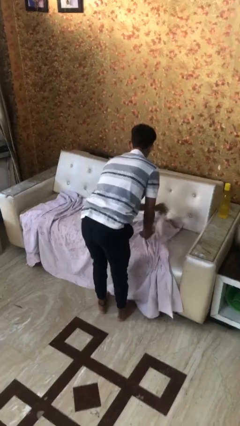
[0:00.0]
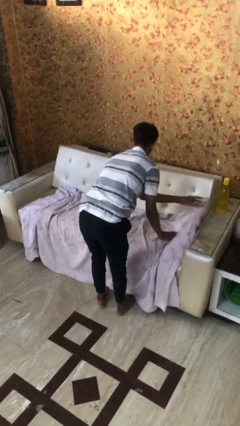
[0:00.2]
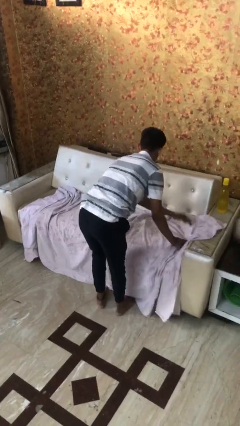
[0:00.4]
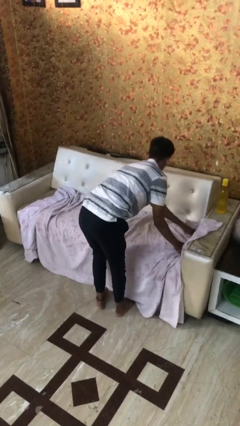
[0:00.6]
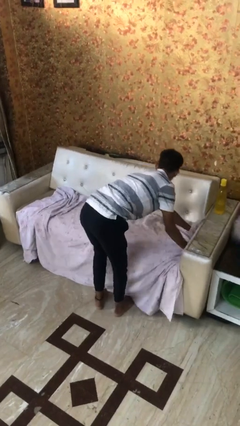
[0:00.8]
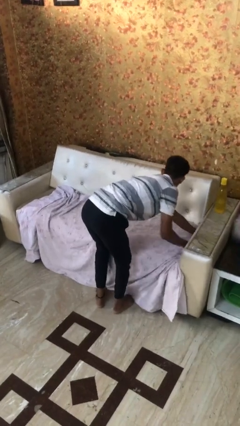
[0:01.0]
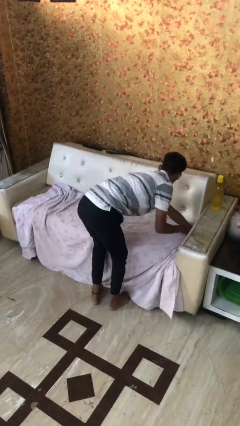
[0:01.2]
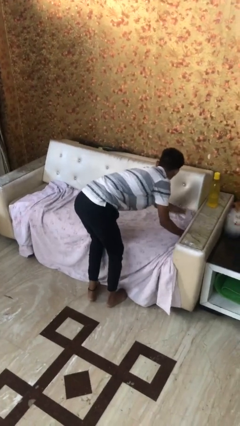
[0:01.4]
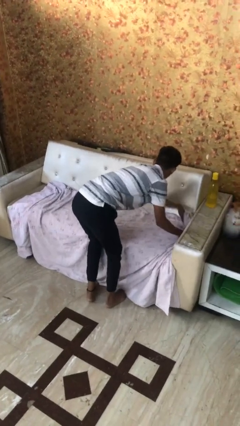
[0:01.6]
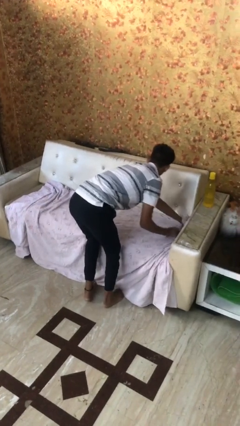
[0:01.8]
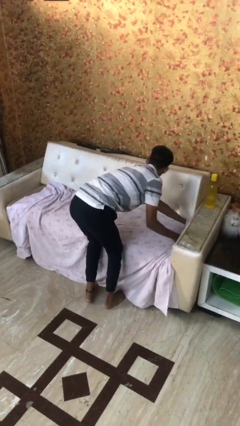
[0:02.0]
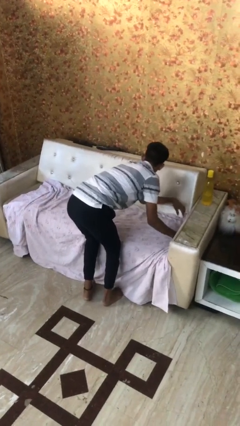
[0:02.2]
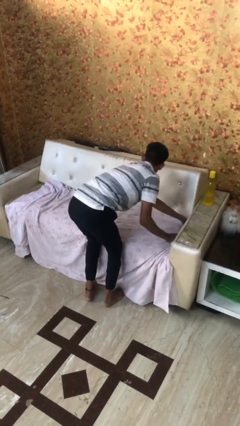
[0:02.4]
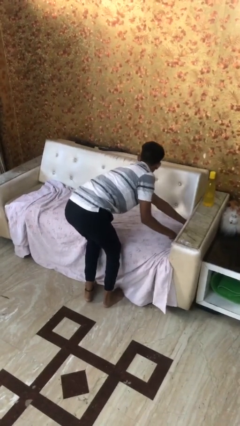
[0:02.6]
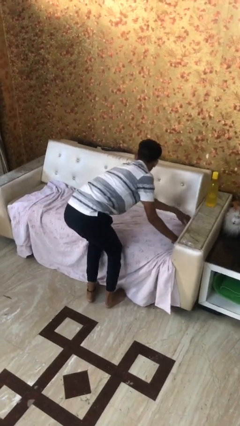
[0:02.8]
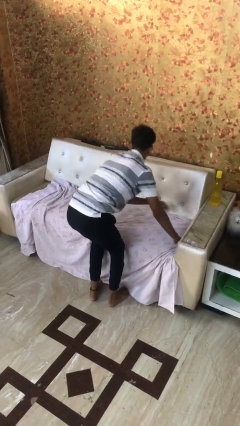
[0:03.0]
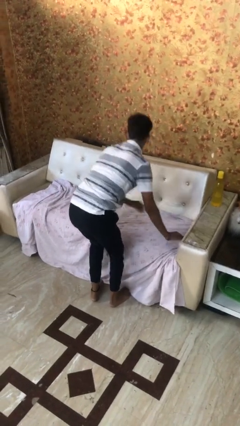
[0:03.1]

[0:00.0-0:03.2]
person makes bed

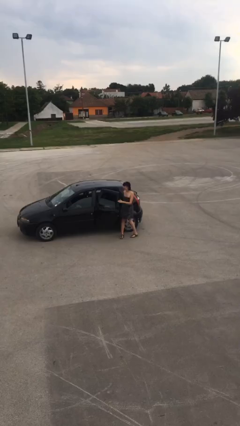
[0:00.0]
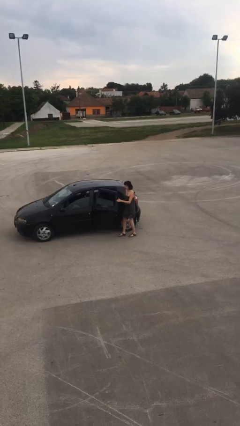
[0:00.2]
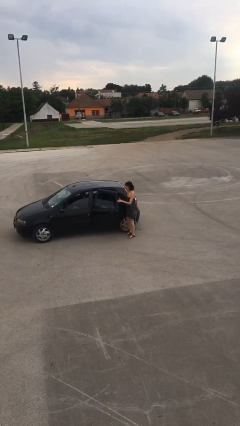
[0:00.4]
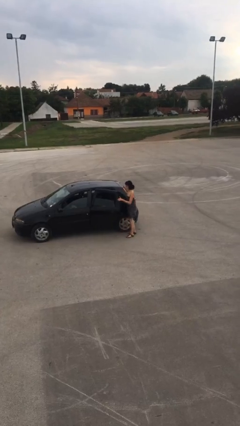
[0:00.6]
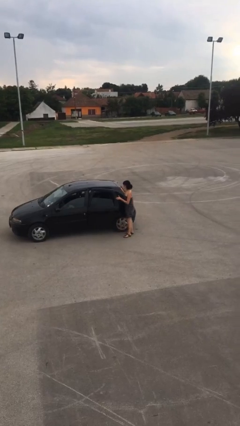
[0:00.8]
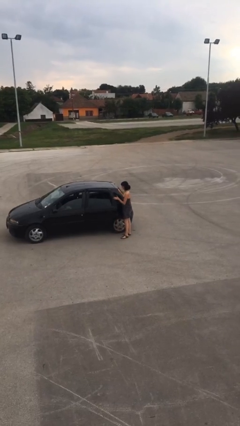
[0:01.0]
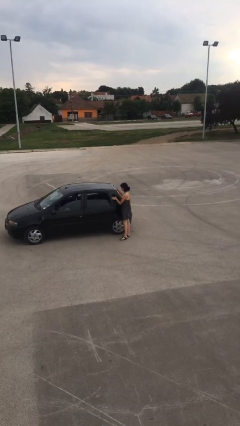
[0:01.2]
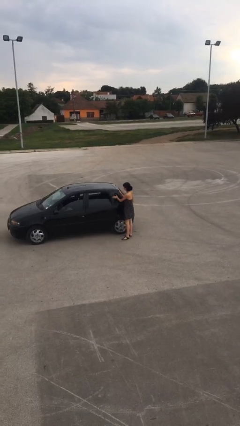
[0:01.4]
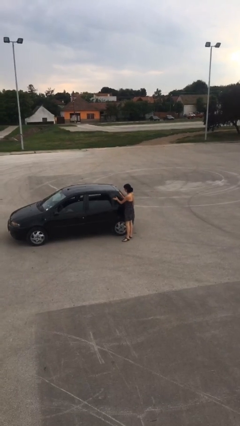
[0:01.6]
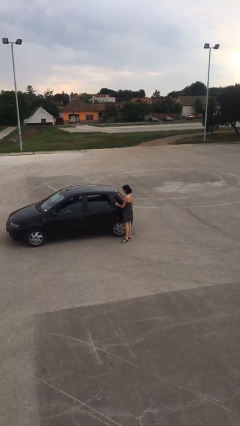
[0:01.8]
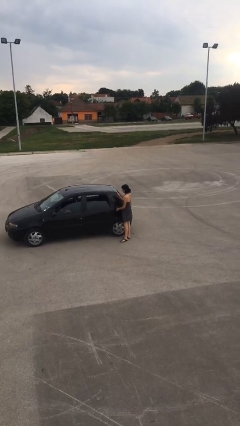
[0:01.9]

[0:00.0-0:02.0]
person closes car door

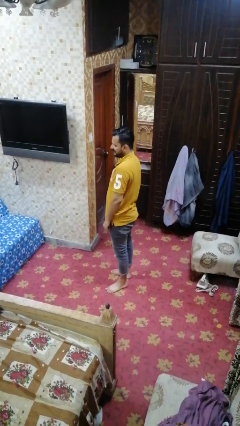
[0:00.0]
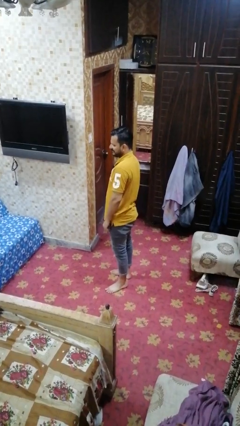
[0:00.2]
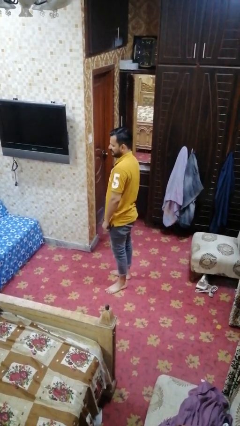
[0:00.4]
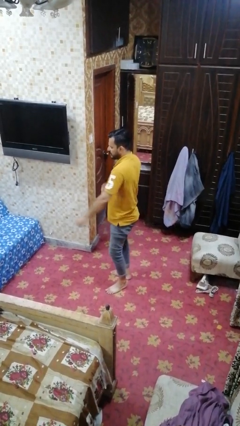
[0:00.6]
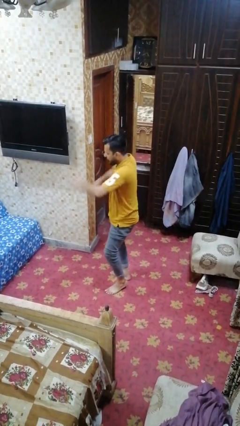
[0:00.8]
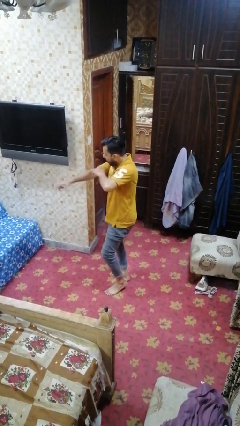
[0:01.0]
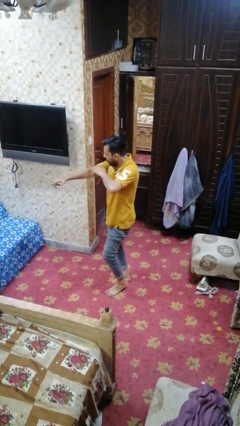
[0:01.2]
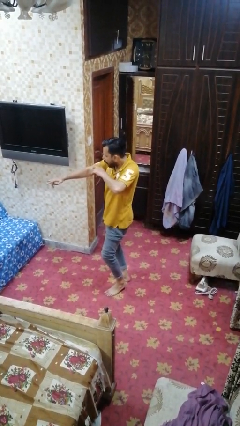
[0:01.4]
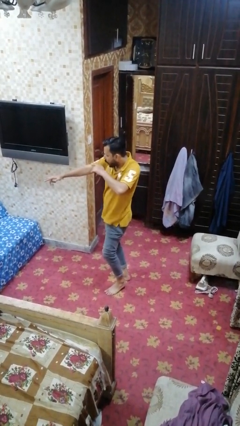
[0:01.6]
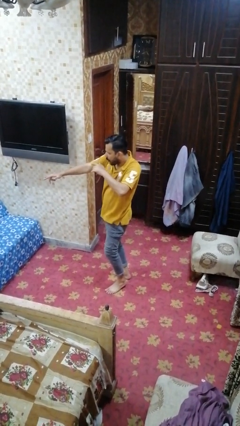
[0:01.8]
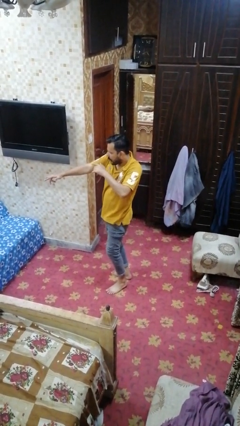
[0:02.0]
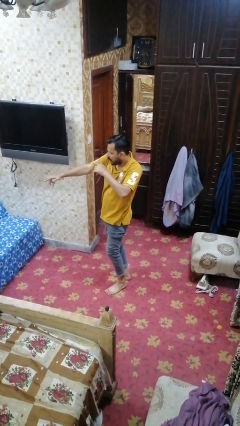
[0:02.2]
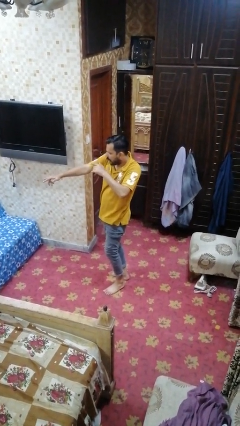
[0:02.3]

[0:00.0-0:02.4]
person karate chop

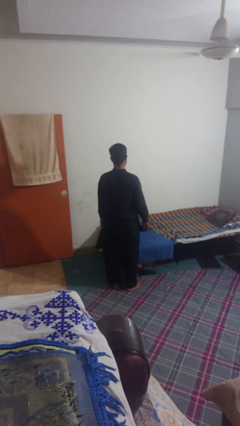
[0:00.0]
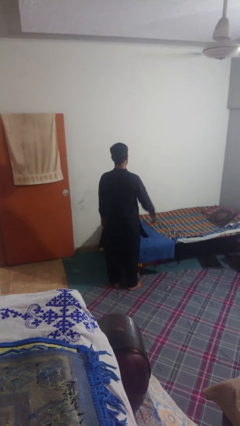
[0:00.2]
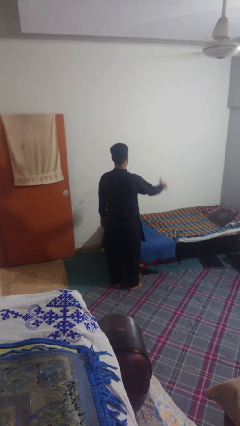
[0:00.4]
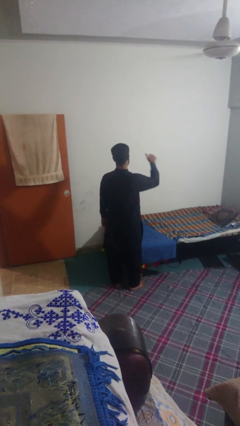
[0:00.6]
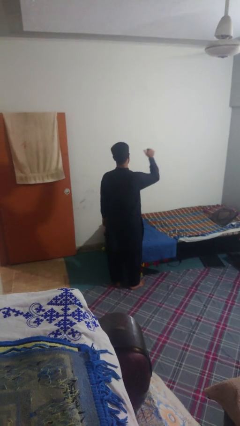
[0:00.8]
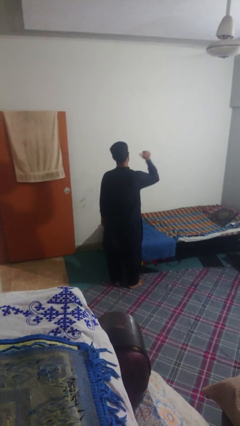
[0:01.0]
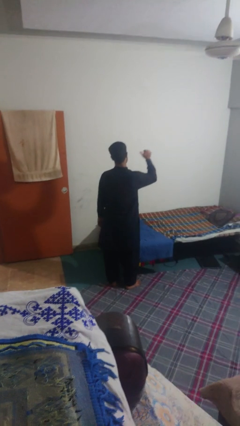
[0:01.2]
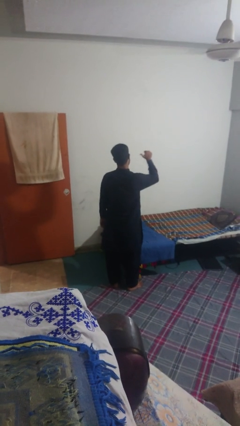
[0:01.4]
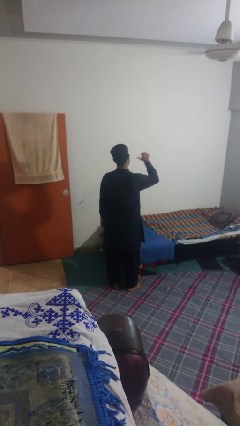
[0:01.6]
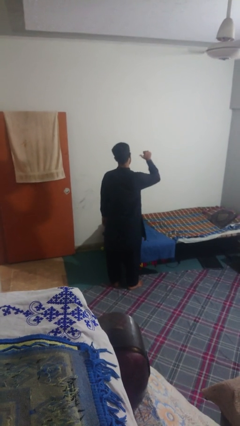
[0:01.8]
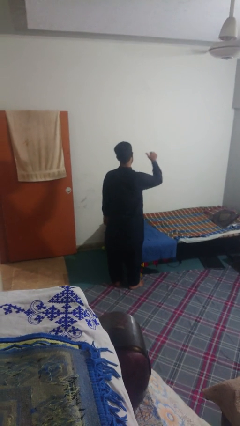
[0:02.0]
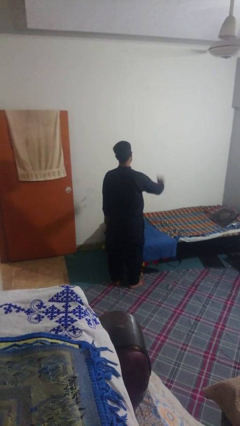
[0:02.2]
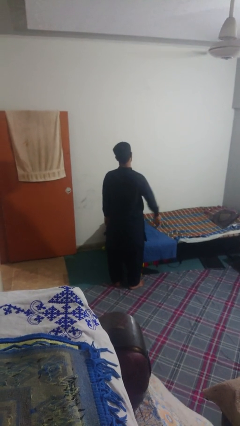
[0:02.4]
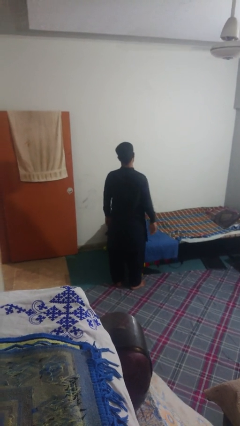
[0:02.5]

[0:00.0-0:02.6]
person gestures behind me

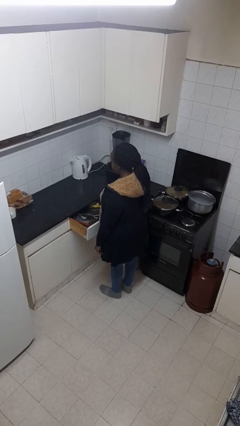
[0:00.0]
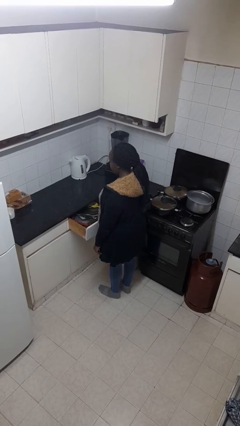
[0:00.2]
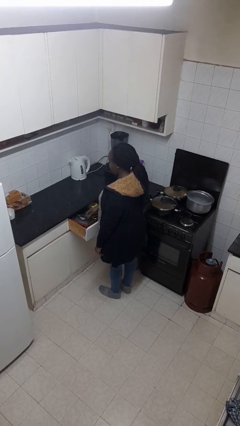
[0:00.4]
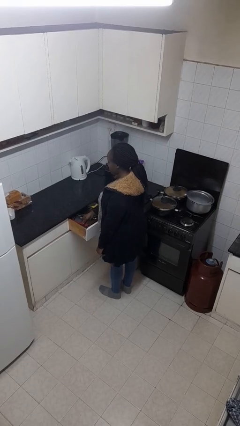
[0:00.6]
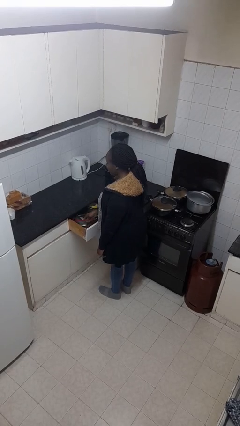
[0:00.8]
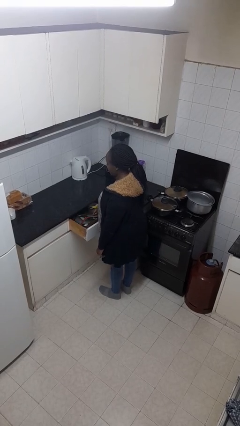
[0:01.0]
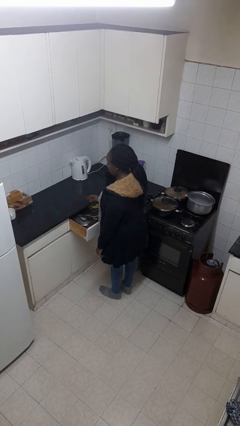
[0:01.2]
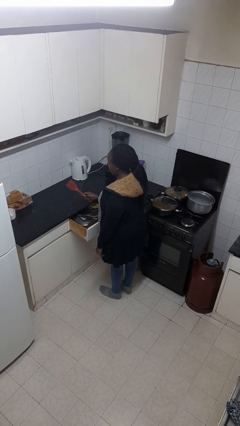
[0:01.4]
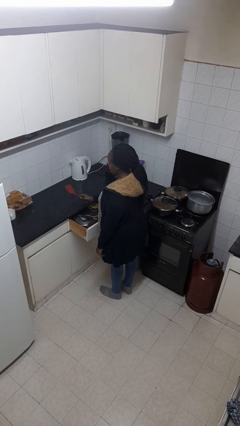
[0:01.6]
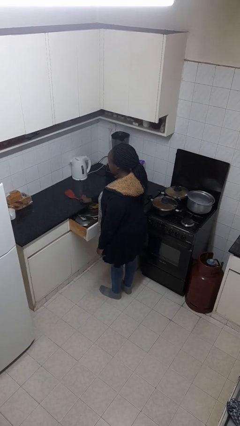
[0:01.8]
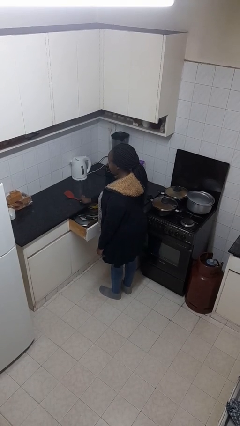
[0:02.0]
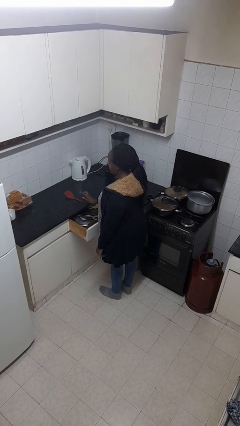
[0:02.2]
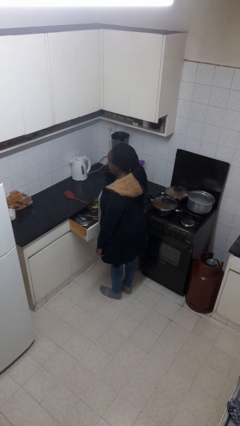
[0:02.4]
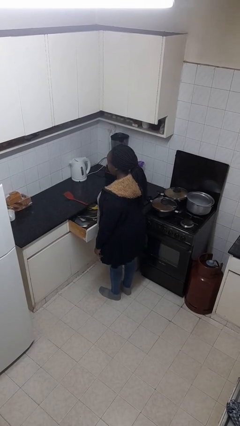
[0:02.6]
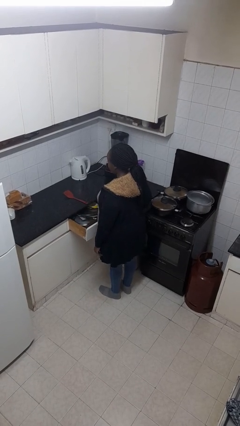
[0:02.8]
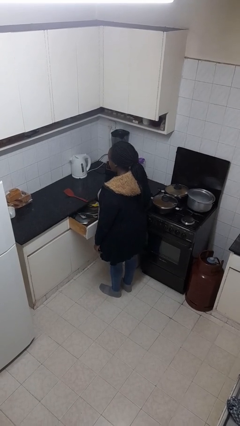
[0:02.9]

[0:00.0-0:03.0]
person takes object from kitchen drawer

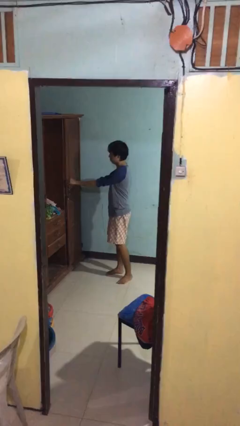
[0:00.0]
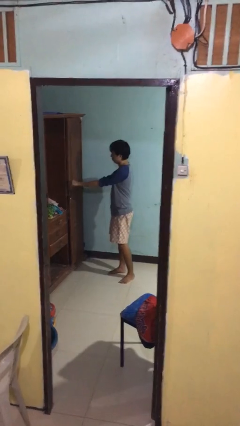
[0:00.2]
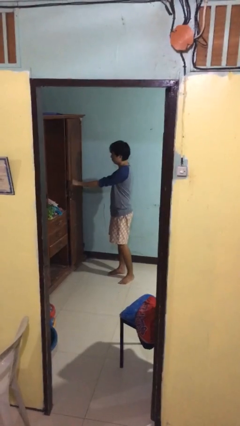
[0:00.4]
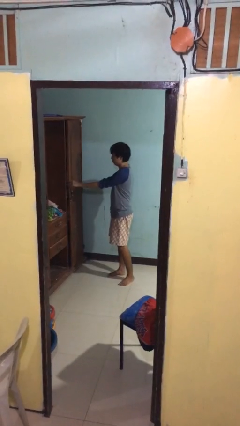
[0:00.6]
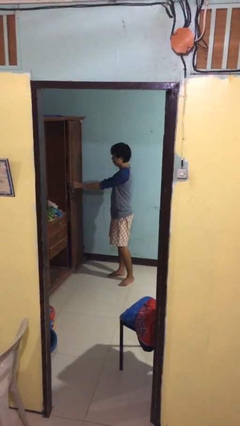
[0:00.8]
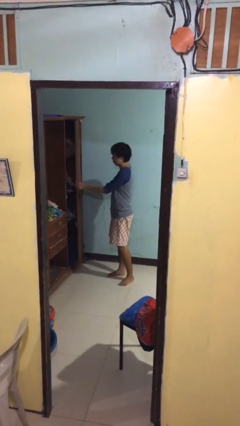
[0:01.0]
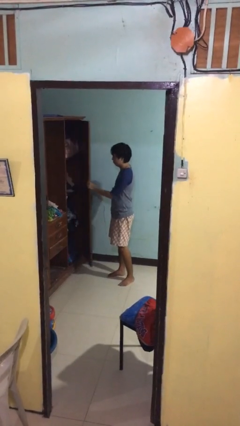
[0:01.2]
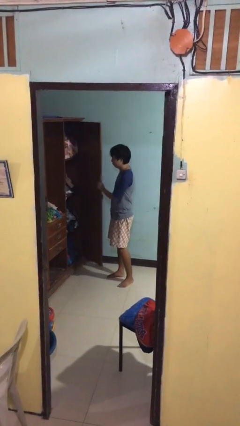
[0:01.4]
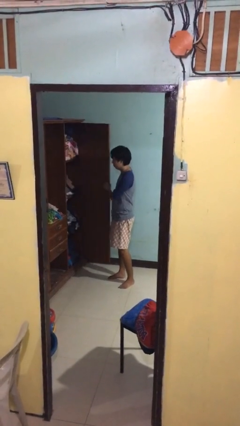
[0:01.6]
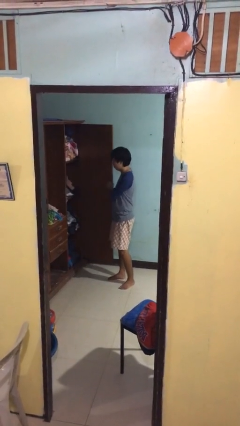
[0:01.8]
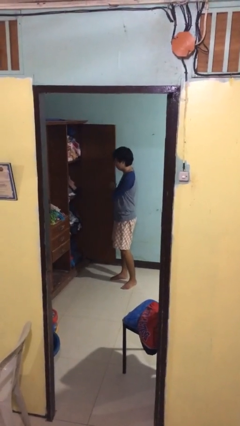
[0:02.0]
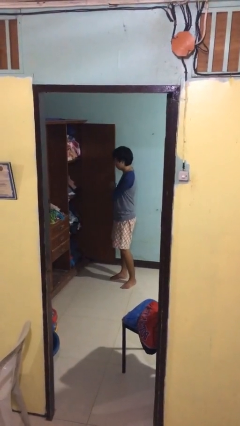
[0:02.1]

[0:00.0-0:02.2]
person opens closet door

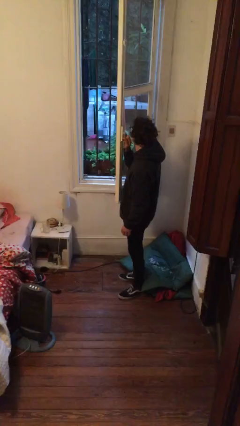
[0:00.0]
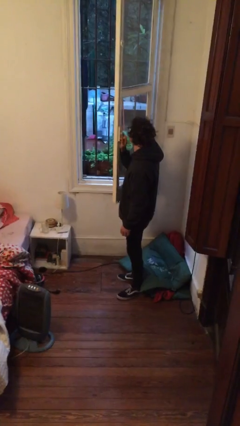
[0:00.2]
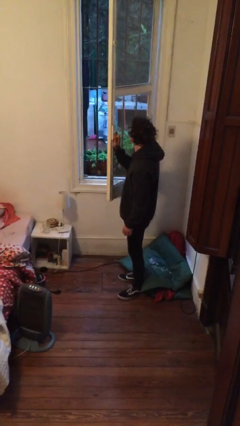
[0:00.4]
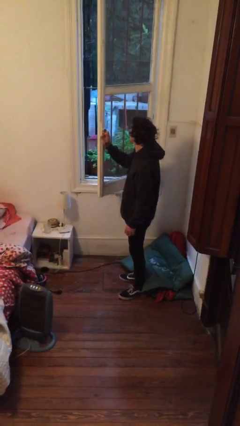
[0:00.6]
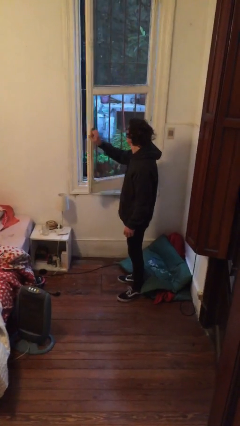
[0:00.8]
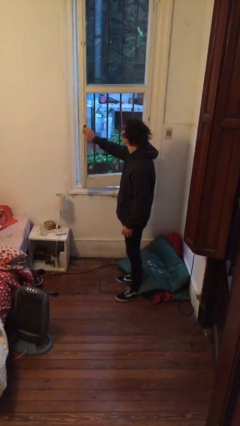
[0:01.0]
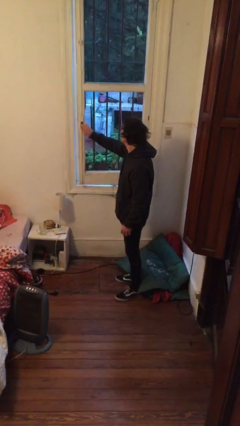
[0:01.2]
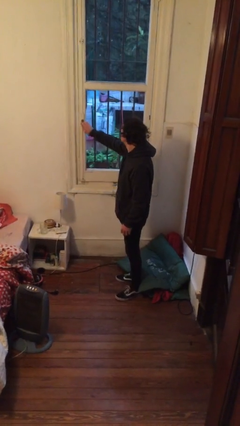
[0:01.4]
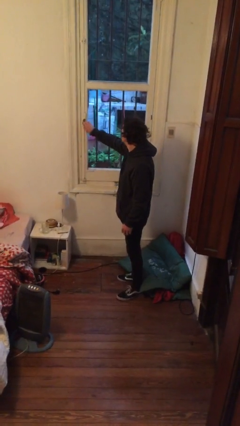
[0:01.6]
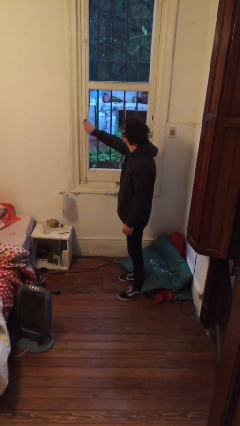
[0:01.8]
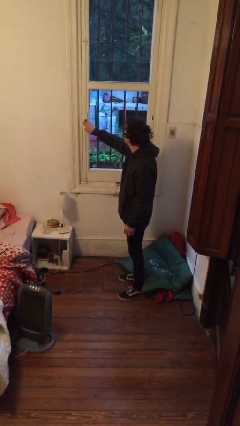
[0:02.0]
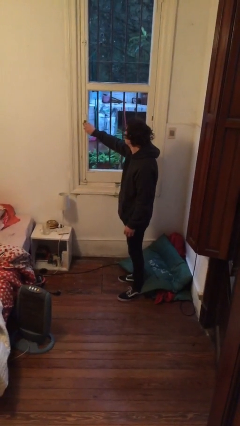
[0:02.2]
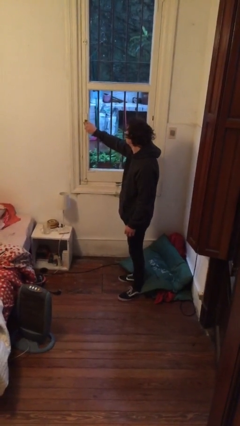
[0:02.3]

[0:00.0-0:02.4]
person closes home window
